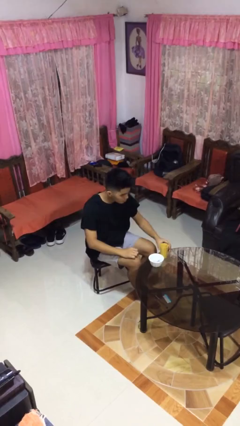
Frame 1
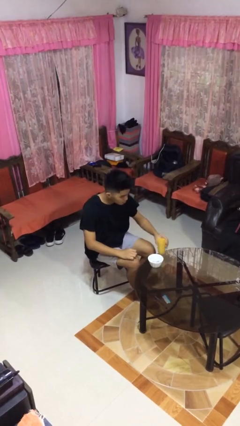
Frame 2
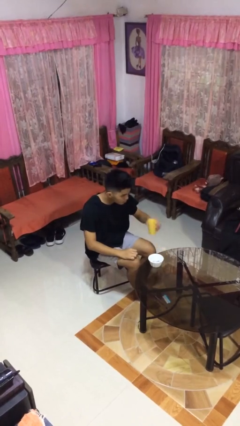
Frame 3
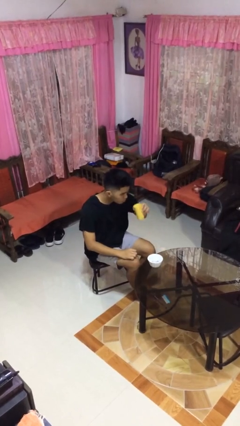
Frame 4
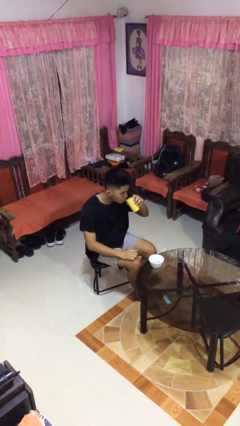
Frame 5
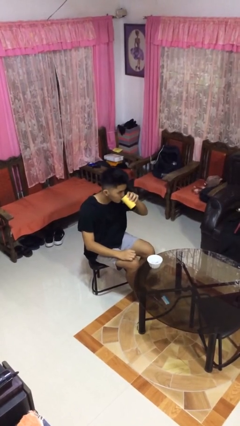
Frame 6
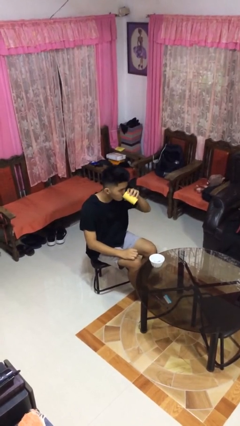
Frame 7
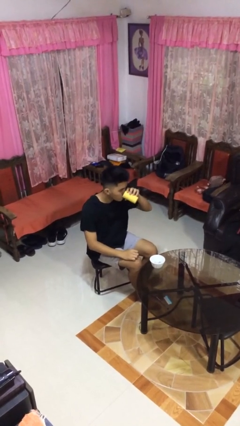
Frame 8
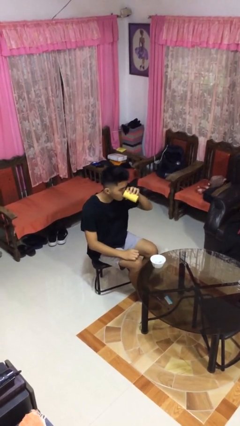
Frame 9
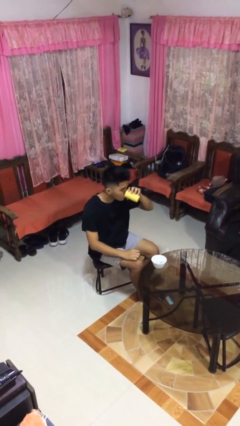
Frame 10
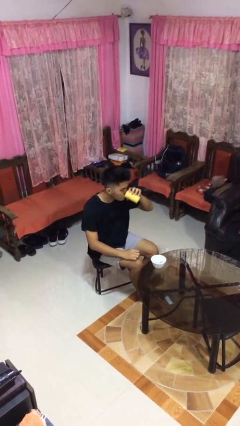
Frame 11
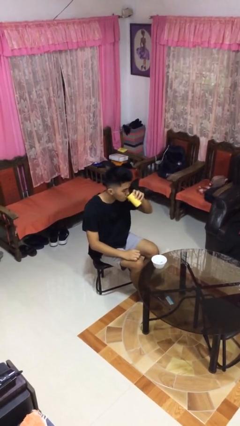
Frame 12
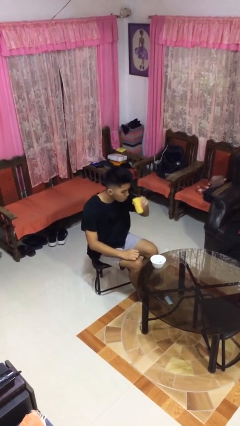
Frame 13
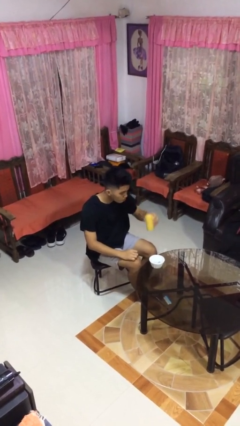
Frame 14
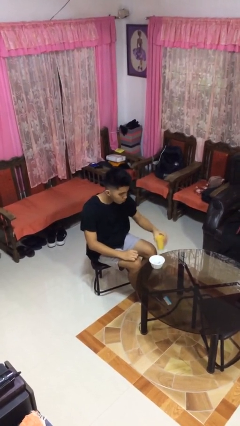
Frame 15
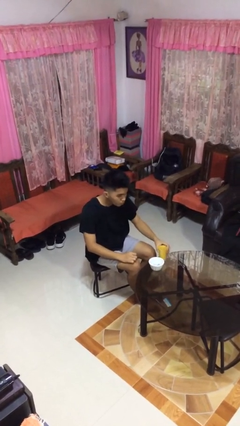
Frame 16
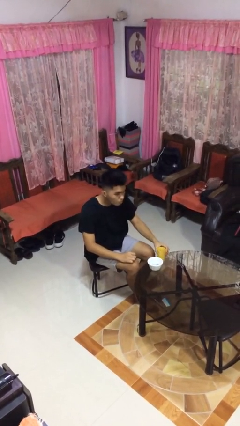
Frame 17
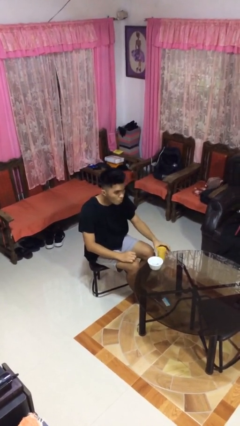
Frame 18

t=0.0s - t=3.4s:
person drinks from cup

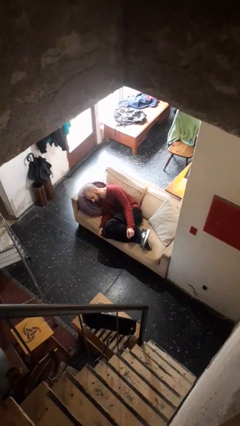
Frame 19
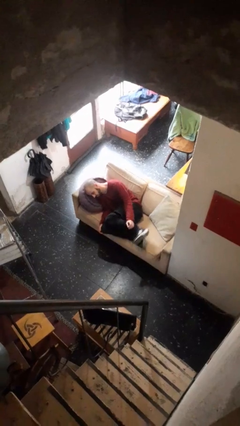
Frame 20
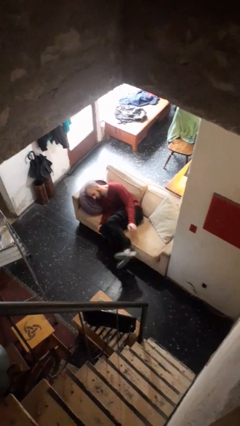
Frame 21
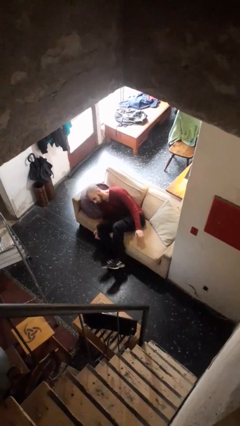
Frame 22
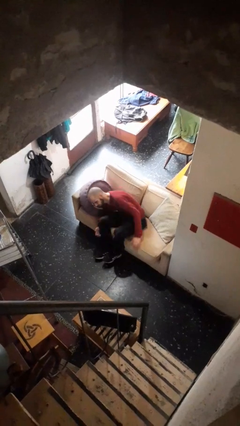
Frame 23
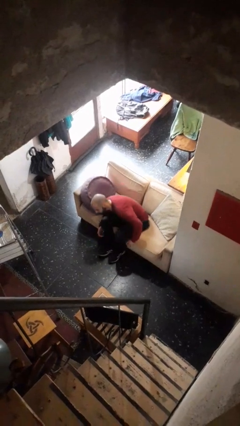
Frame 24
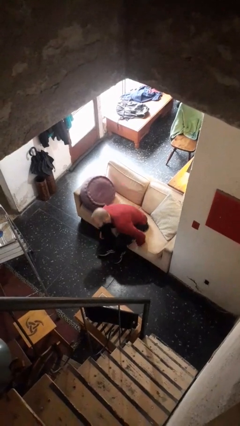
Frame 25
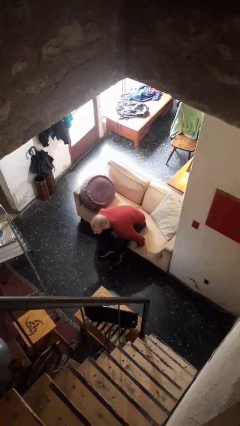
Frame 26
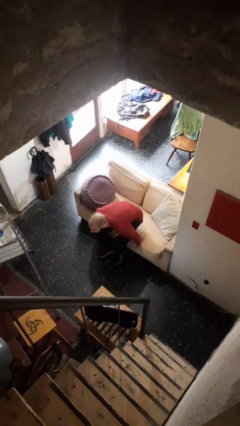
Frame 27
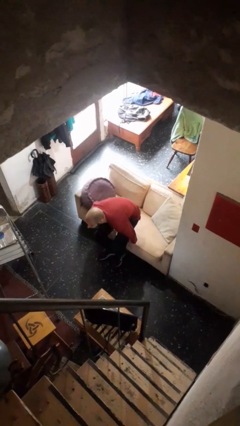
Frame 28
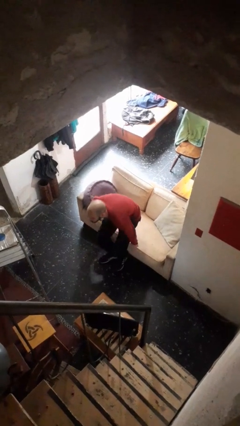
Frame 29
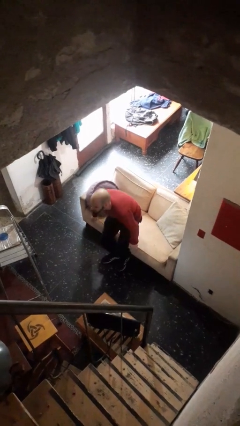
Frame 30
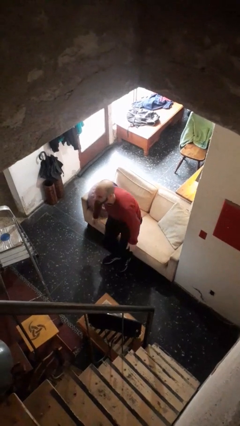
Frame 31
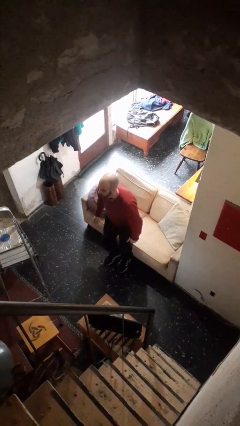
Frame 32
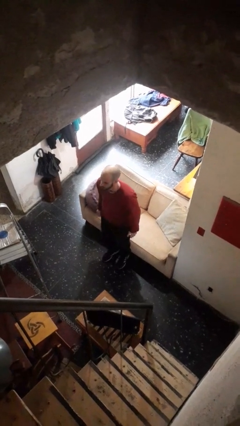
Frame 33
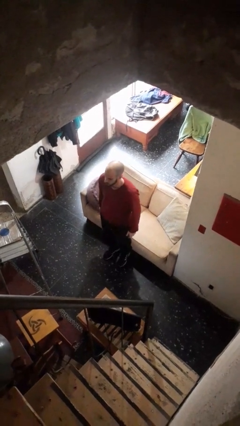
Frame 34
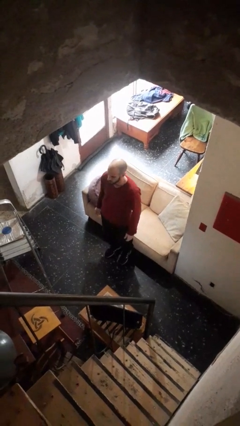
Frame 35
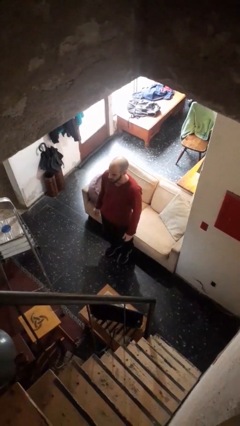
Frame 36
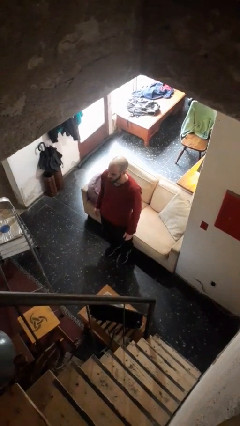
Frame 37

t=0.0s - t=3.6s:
person stands up

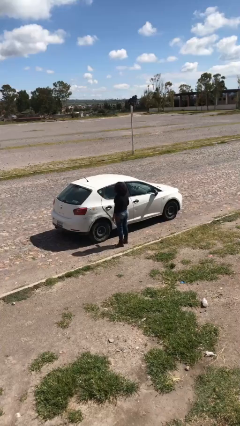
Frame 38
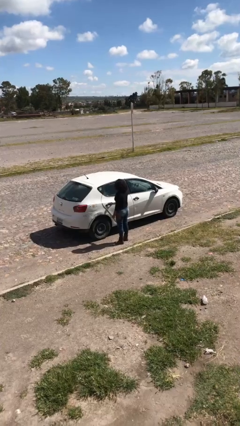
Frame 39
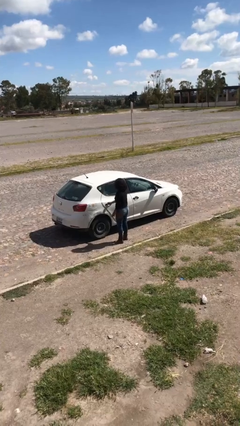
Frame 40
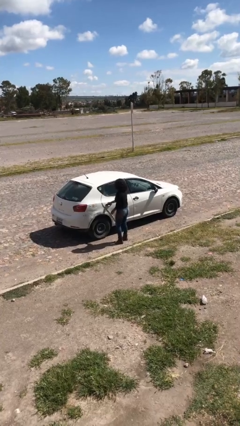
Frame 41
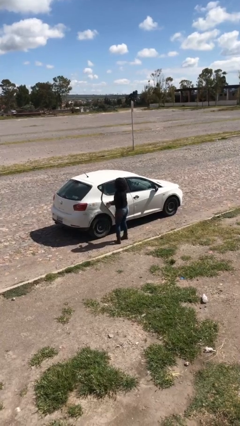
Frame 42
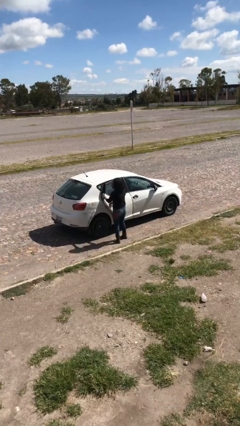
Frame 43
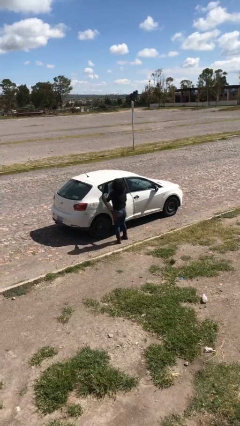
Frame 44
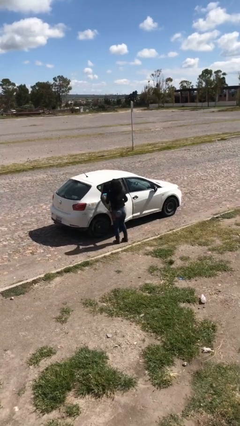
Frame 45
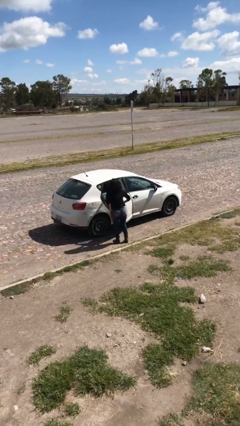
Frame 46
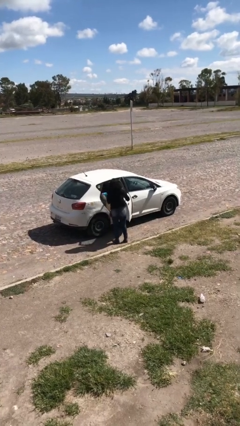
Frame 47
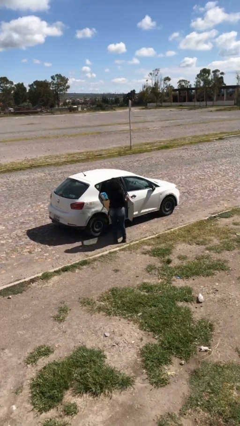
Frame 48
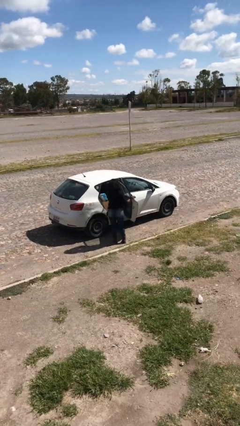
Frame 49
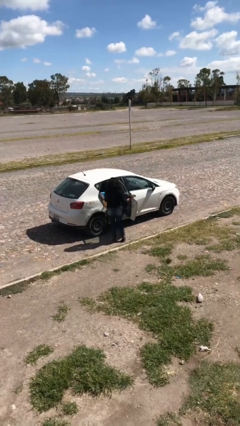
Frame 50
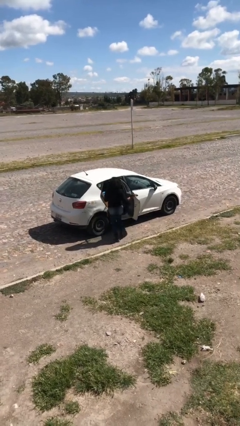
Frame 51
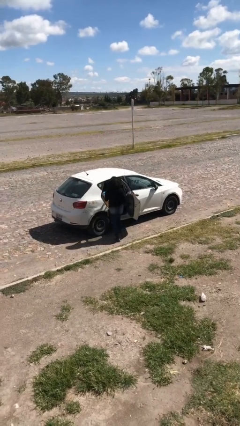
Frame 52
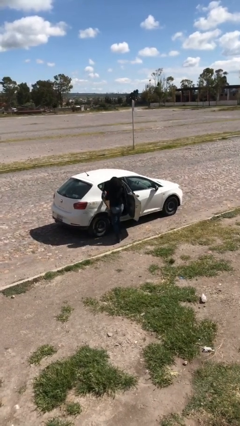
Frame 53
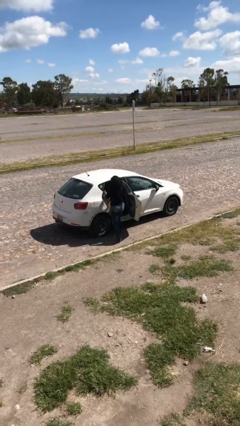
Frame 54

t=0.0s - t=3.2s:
person opens car door

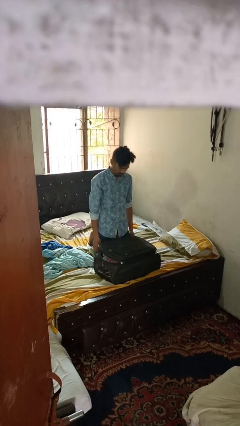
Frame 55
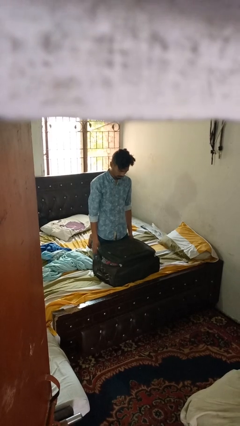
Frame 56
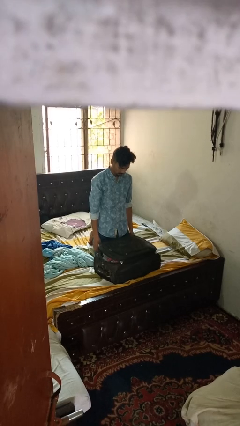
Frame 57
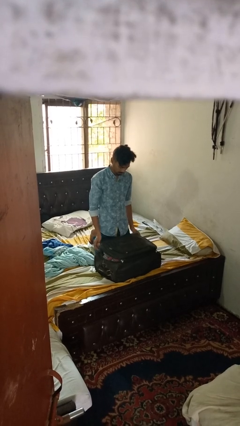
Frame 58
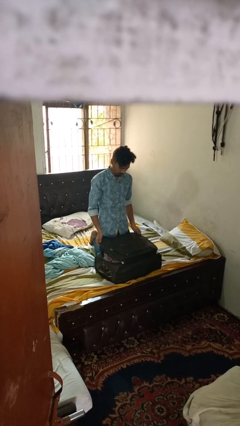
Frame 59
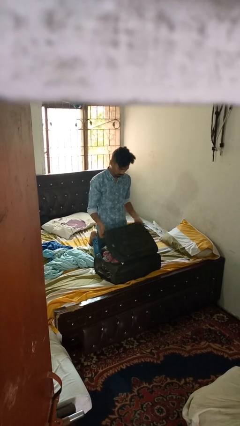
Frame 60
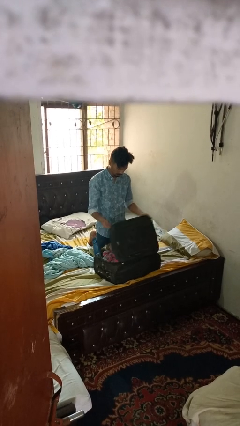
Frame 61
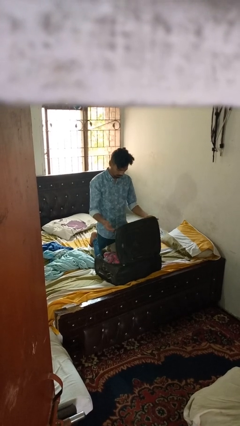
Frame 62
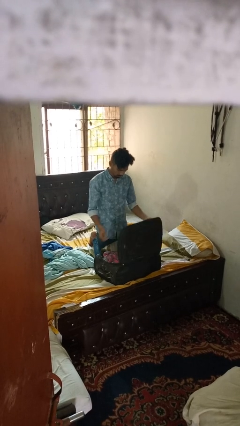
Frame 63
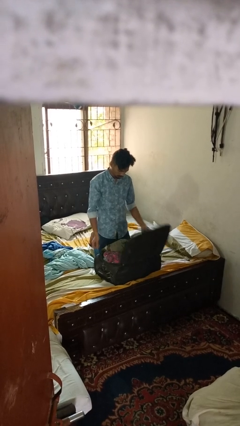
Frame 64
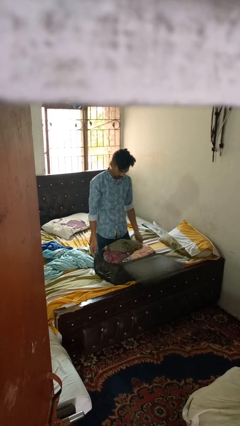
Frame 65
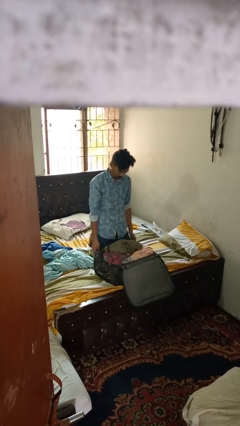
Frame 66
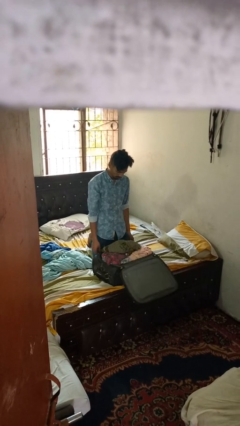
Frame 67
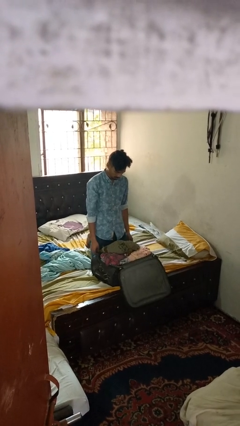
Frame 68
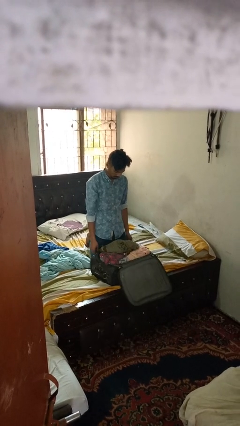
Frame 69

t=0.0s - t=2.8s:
person opens suitcase

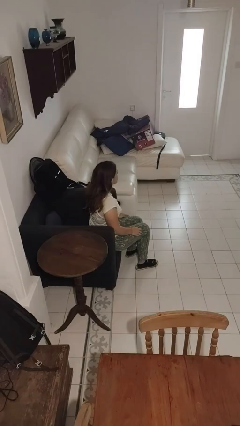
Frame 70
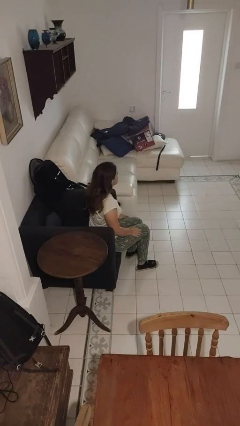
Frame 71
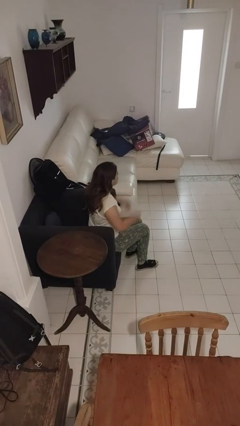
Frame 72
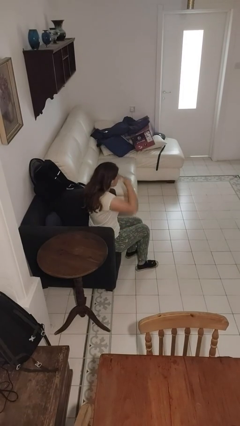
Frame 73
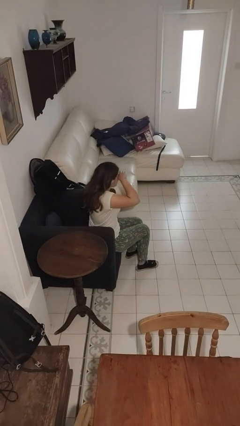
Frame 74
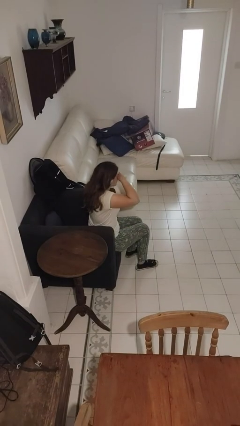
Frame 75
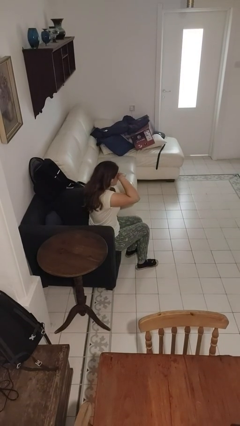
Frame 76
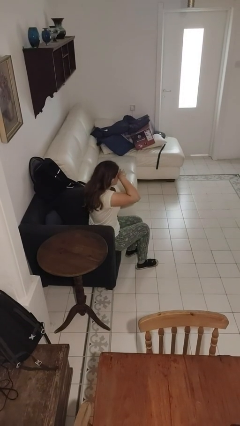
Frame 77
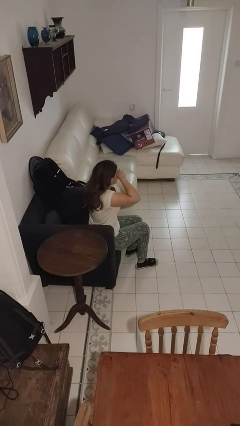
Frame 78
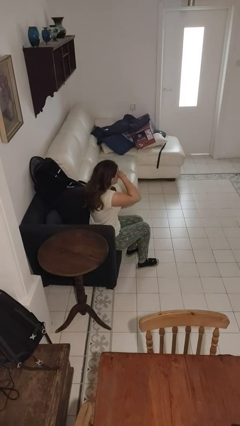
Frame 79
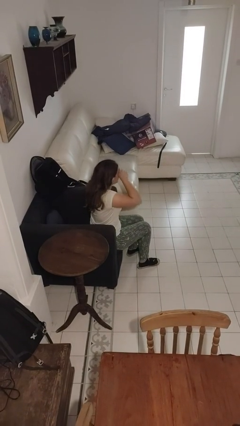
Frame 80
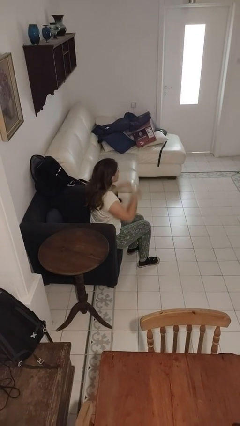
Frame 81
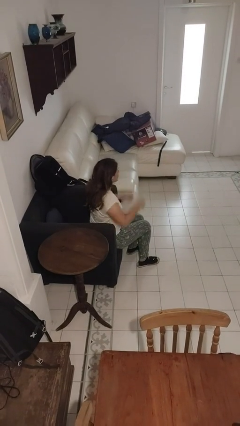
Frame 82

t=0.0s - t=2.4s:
person rubs eyes

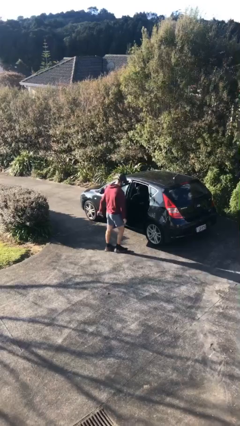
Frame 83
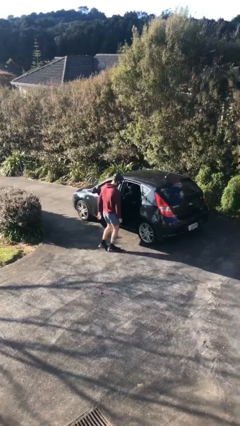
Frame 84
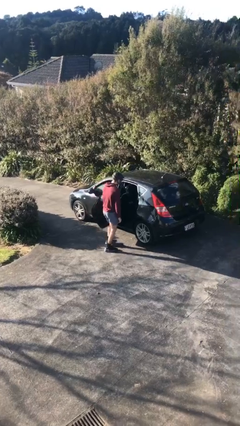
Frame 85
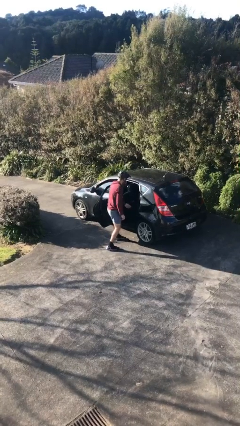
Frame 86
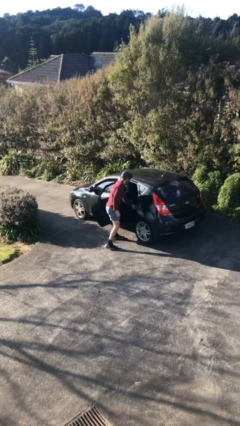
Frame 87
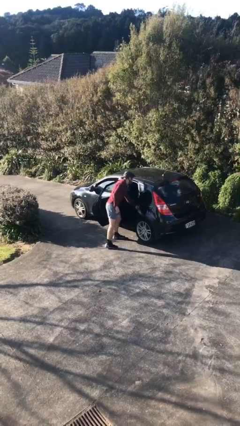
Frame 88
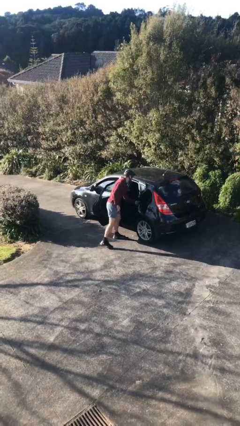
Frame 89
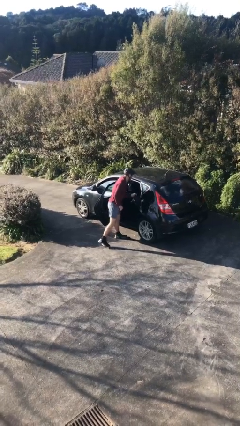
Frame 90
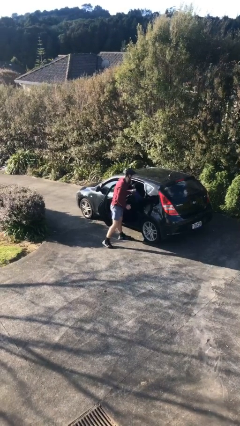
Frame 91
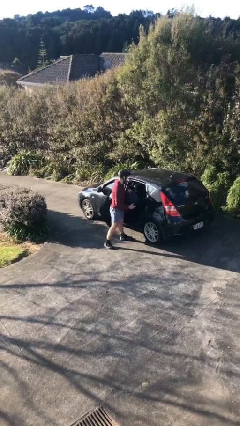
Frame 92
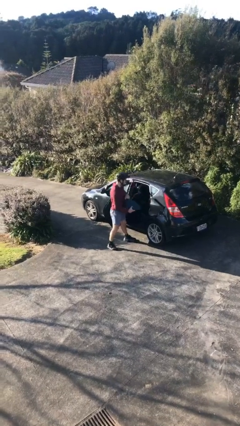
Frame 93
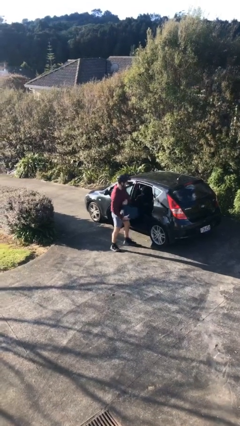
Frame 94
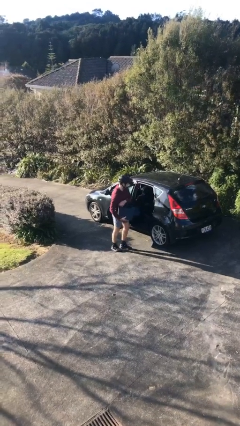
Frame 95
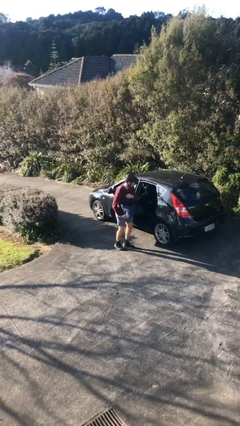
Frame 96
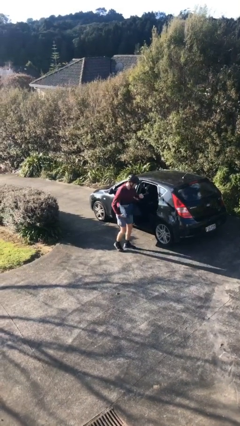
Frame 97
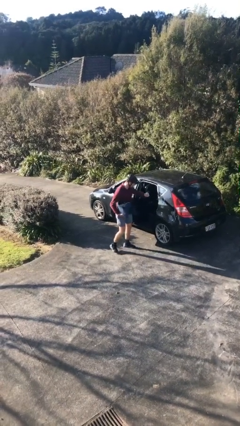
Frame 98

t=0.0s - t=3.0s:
person unloads car
